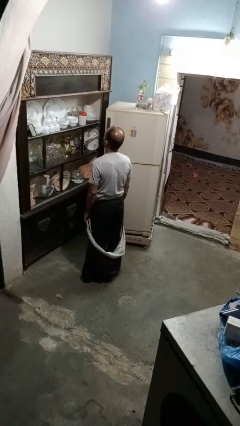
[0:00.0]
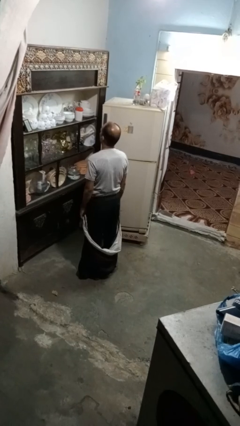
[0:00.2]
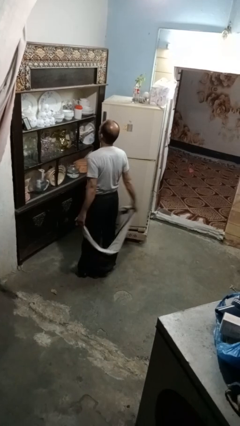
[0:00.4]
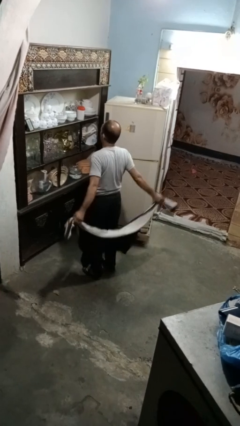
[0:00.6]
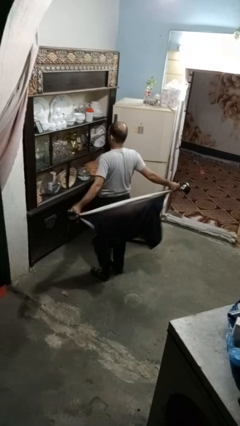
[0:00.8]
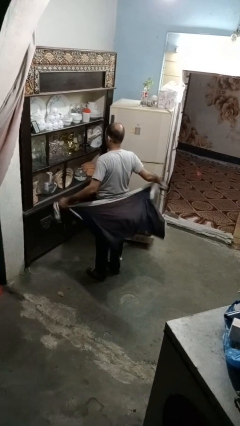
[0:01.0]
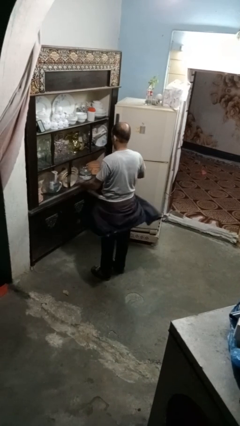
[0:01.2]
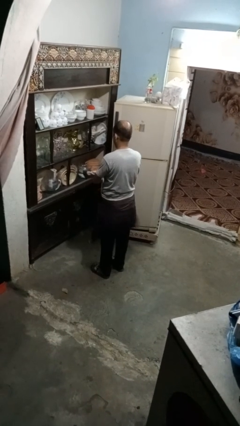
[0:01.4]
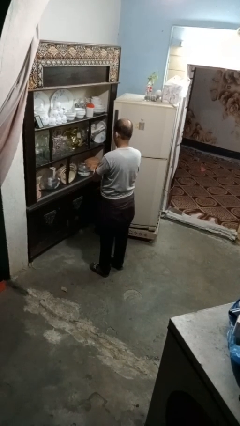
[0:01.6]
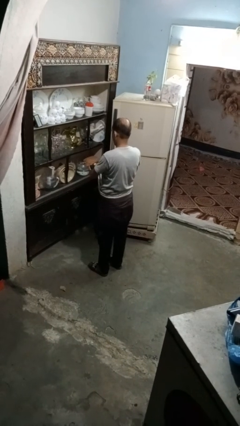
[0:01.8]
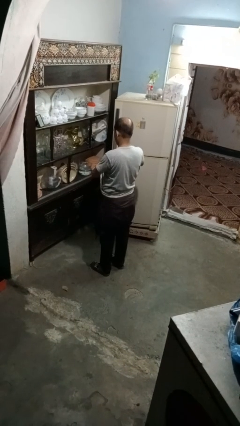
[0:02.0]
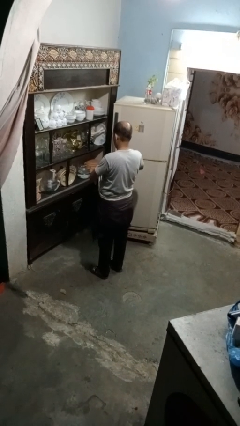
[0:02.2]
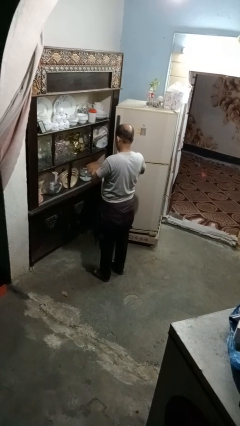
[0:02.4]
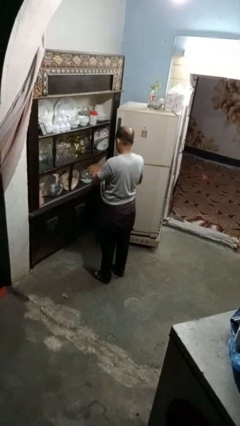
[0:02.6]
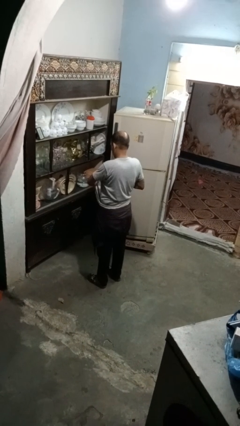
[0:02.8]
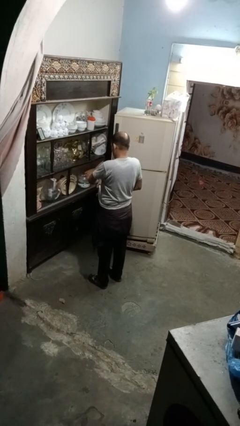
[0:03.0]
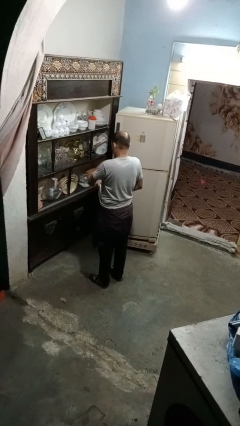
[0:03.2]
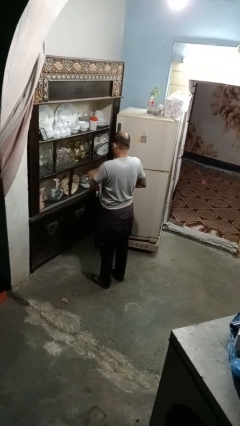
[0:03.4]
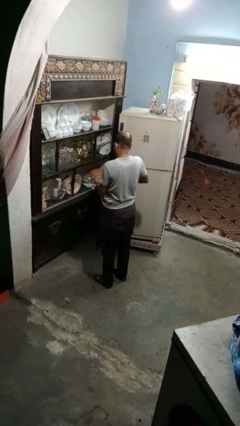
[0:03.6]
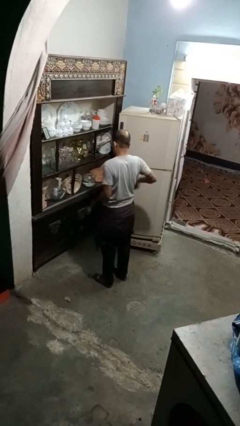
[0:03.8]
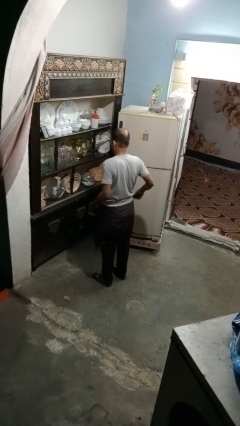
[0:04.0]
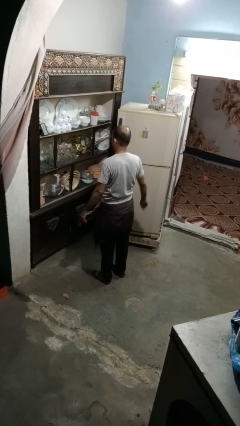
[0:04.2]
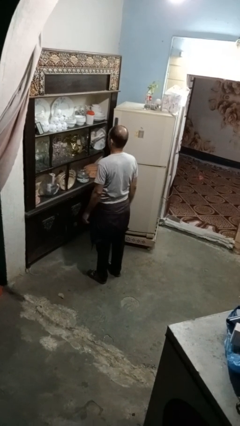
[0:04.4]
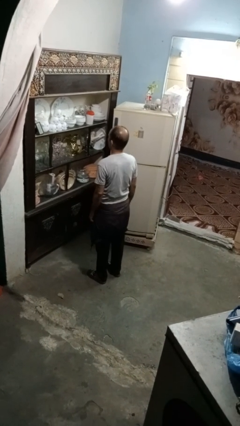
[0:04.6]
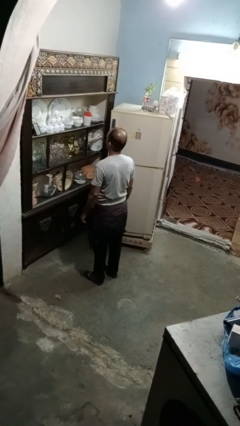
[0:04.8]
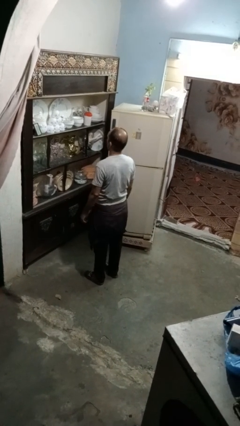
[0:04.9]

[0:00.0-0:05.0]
person ties jacket around waist

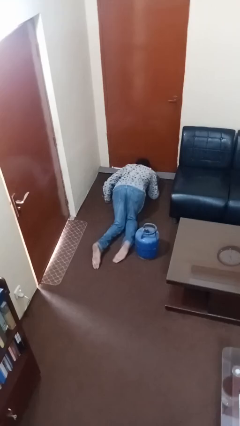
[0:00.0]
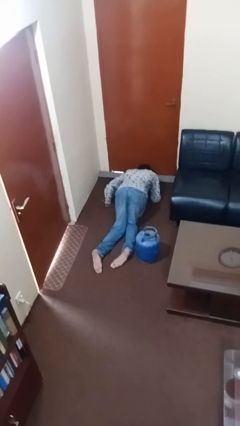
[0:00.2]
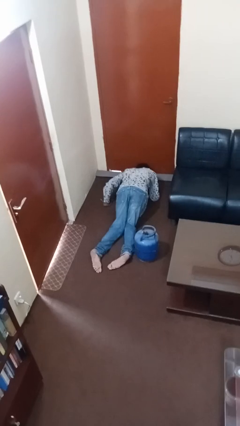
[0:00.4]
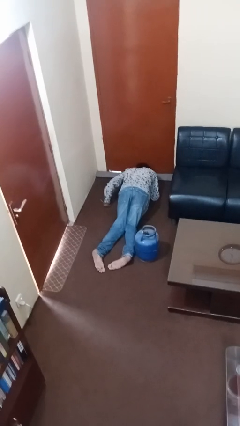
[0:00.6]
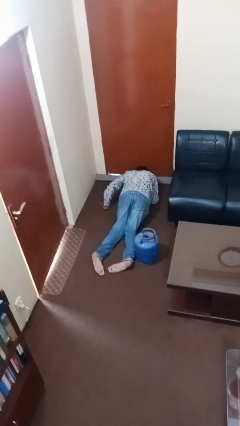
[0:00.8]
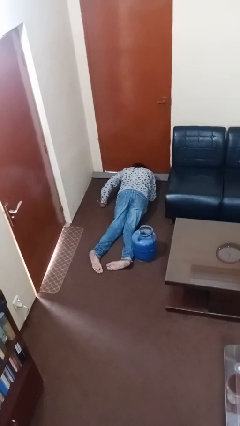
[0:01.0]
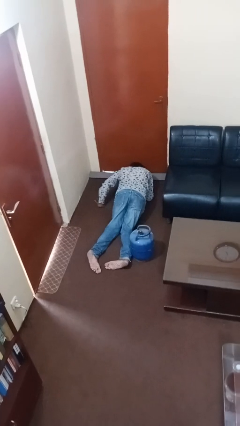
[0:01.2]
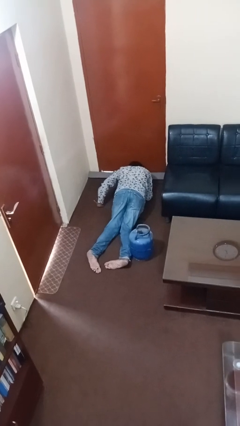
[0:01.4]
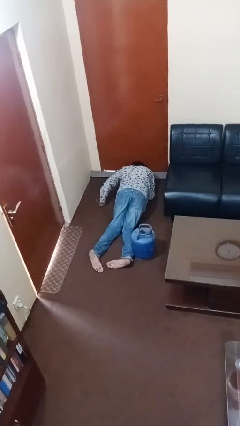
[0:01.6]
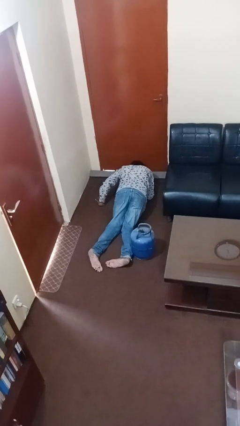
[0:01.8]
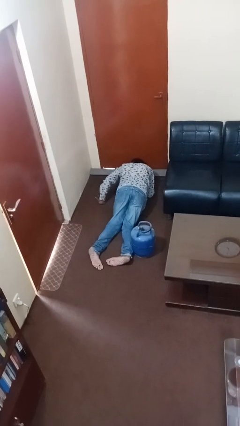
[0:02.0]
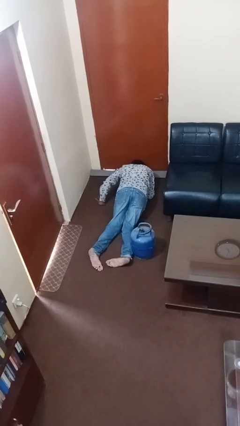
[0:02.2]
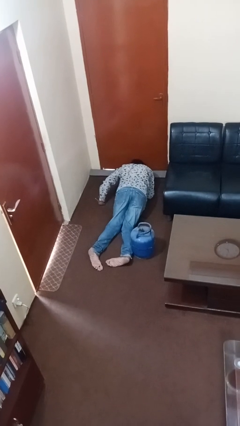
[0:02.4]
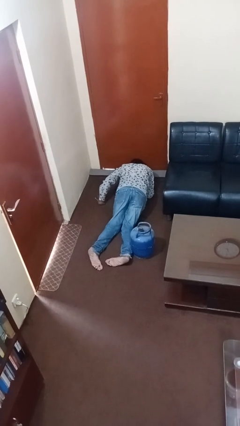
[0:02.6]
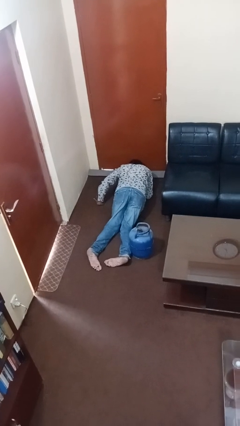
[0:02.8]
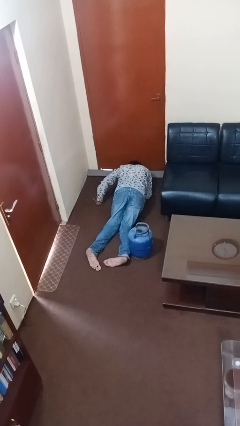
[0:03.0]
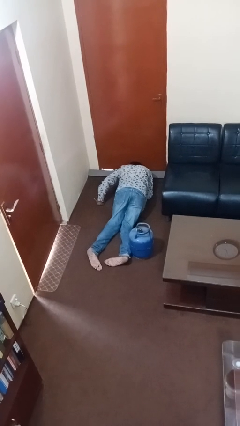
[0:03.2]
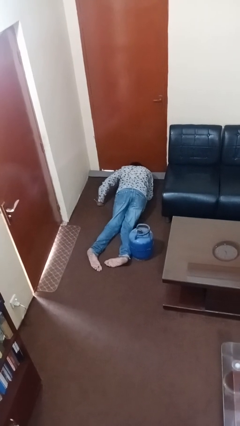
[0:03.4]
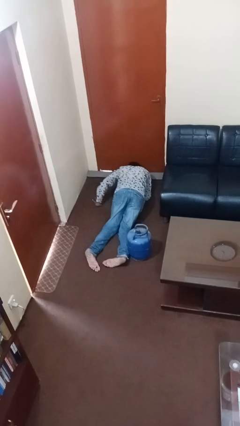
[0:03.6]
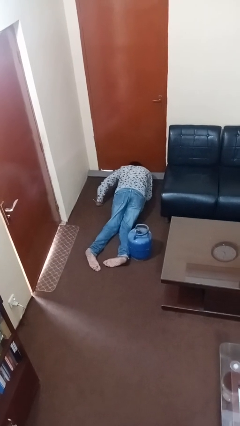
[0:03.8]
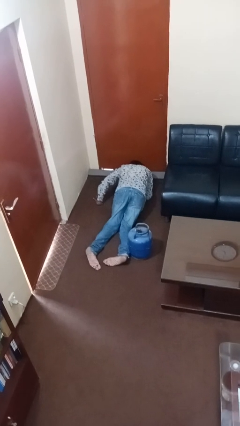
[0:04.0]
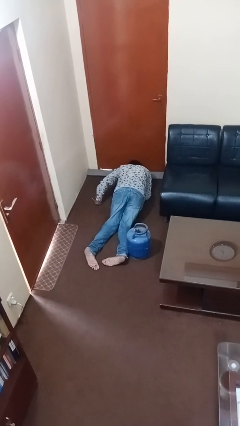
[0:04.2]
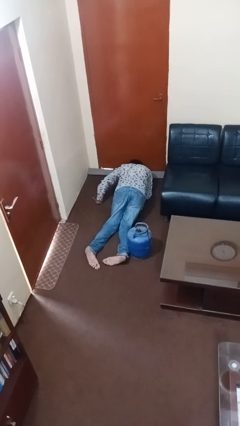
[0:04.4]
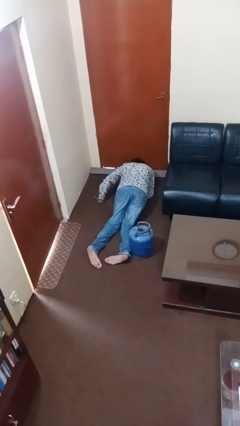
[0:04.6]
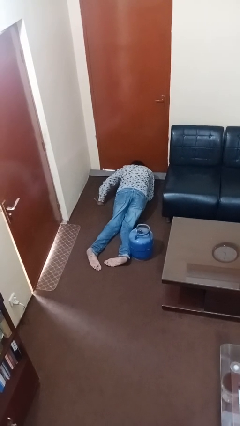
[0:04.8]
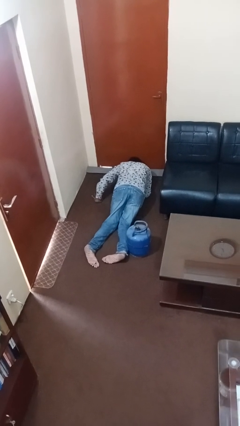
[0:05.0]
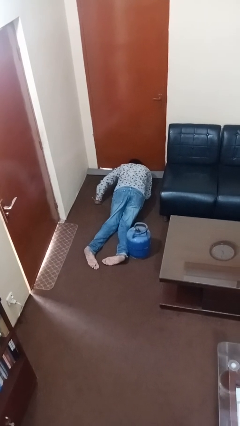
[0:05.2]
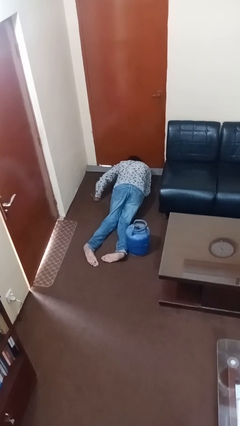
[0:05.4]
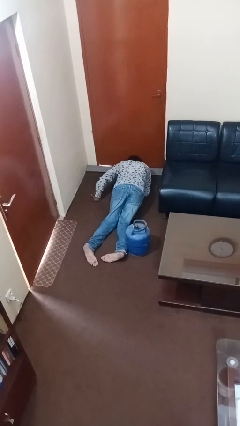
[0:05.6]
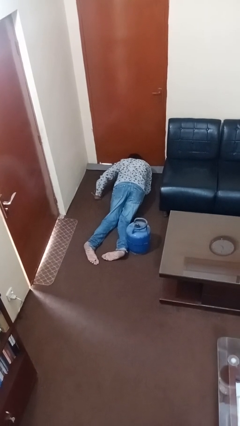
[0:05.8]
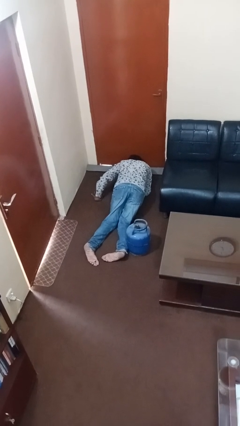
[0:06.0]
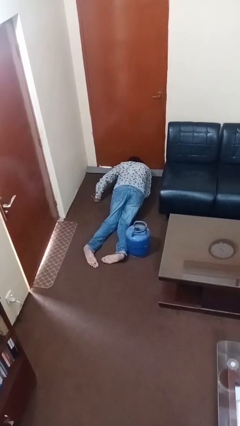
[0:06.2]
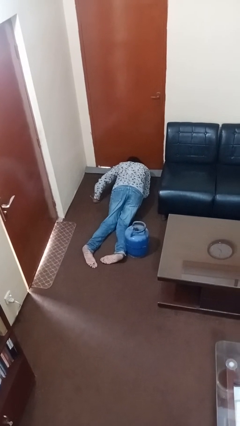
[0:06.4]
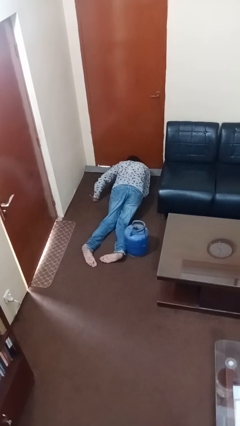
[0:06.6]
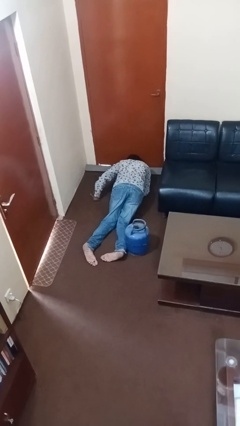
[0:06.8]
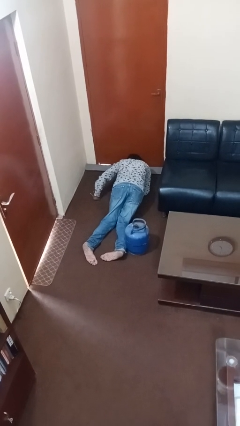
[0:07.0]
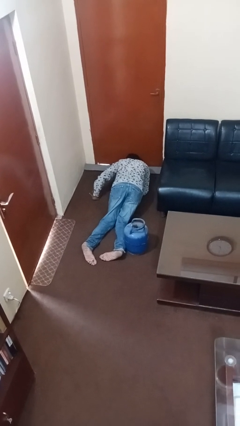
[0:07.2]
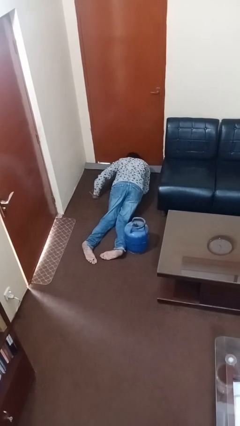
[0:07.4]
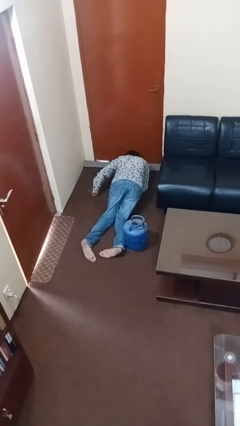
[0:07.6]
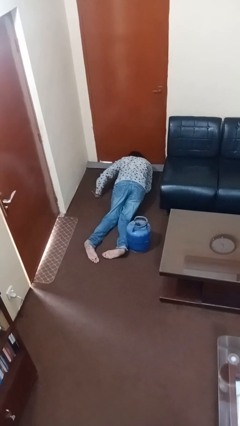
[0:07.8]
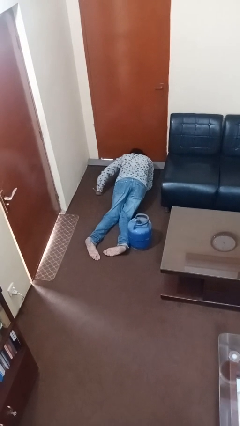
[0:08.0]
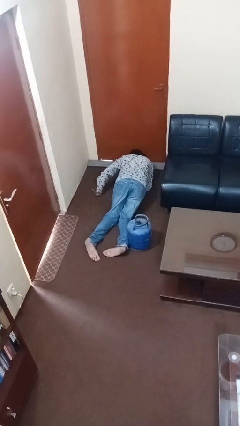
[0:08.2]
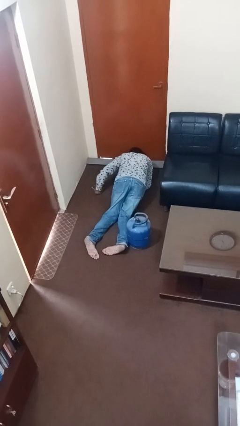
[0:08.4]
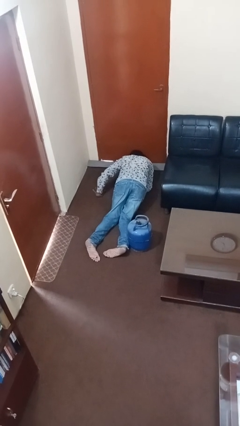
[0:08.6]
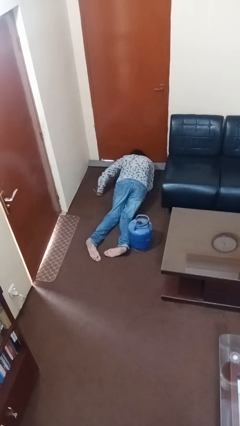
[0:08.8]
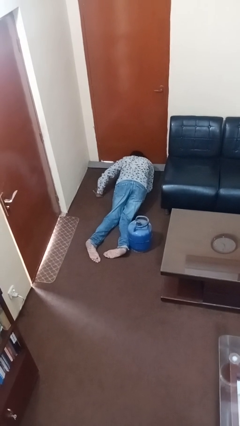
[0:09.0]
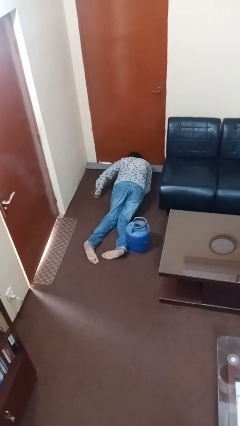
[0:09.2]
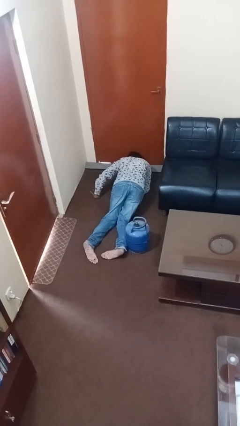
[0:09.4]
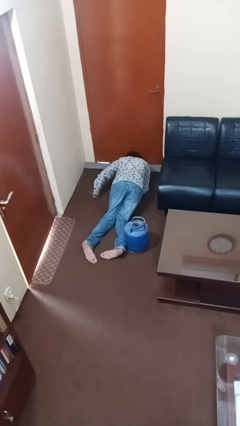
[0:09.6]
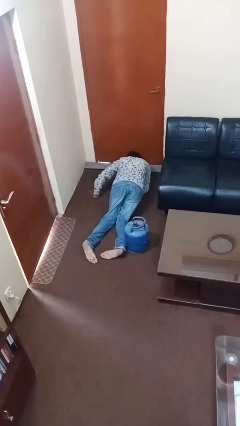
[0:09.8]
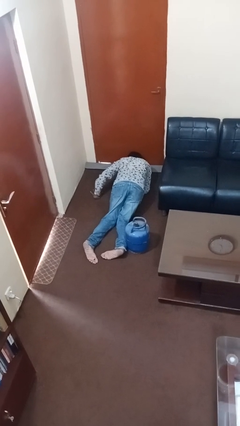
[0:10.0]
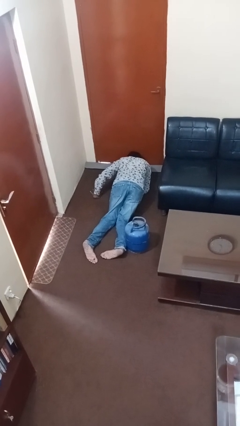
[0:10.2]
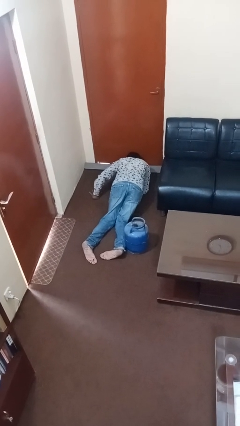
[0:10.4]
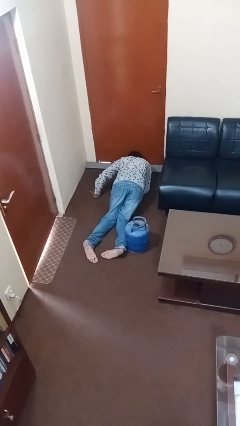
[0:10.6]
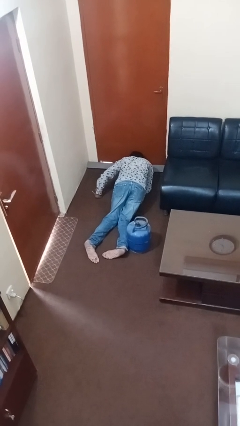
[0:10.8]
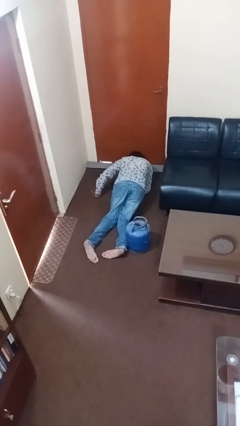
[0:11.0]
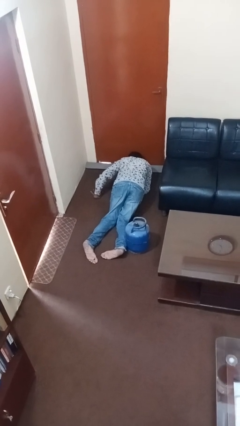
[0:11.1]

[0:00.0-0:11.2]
person lies down on floor

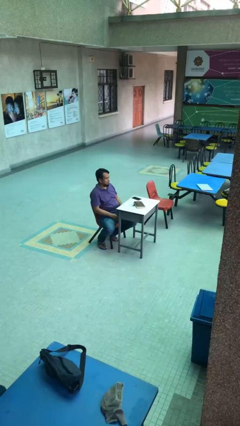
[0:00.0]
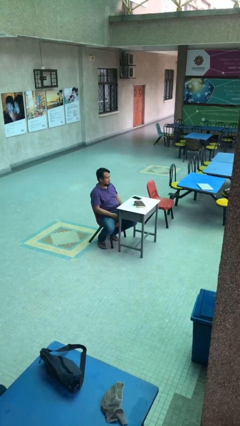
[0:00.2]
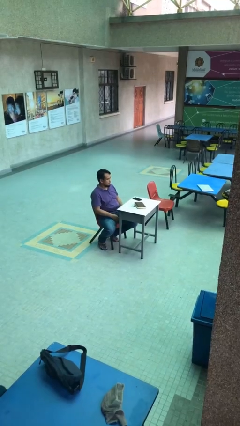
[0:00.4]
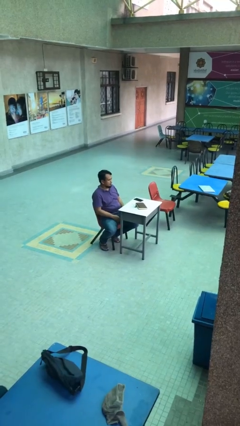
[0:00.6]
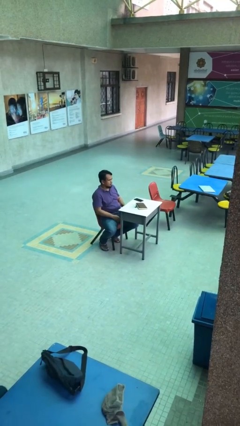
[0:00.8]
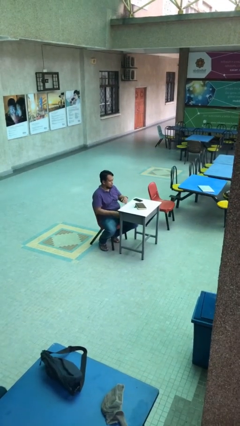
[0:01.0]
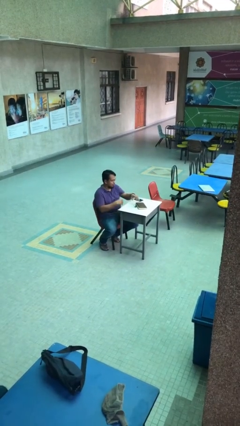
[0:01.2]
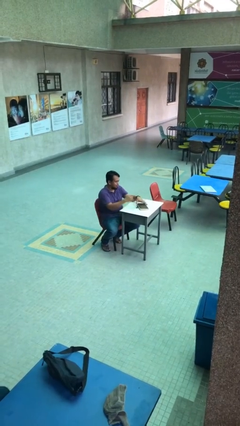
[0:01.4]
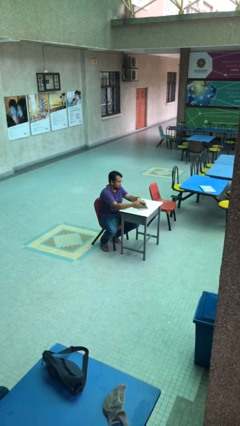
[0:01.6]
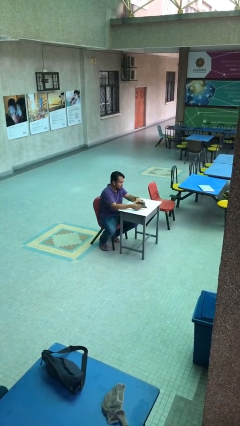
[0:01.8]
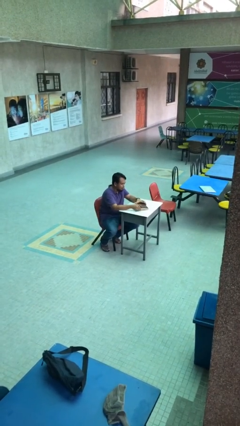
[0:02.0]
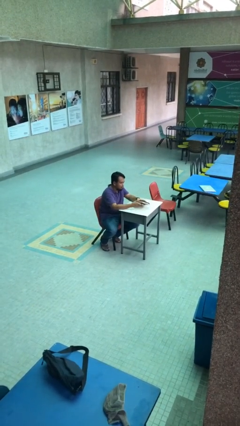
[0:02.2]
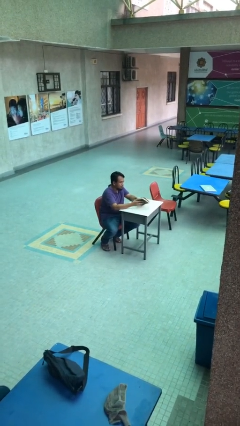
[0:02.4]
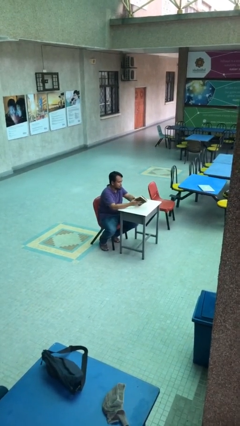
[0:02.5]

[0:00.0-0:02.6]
person picks up object from table
